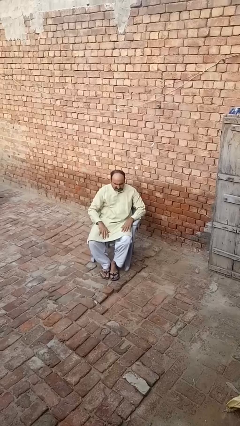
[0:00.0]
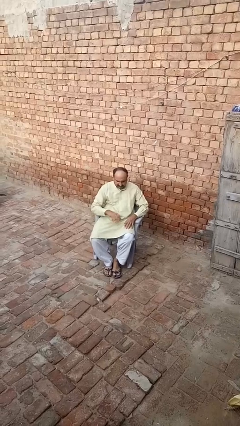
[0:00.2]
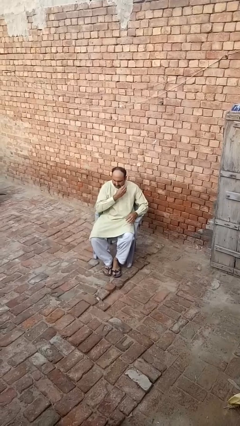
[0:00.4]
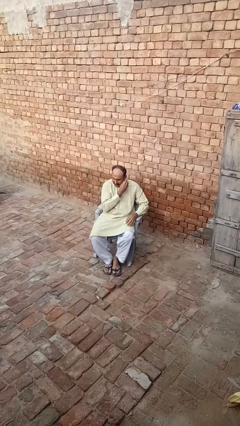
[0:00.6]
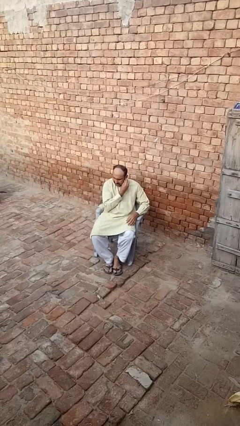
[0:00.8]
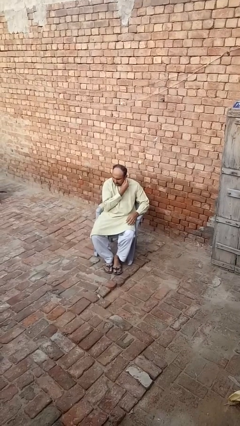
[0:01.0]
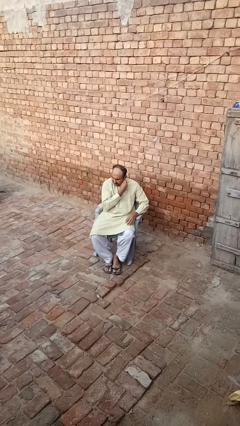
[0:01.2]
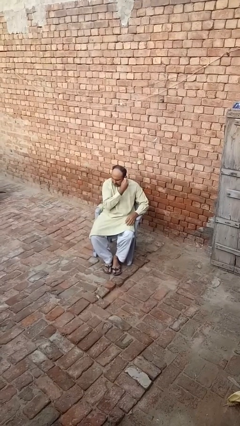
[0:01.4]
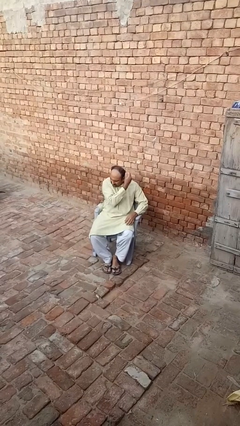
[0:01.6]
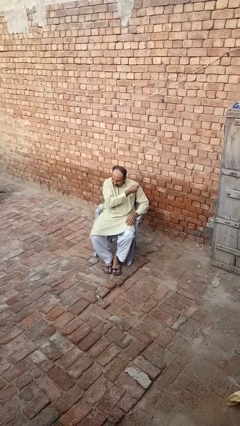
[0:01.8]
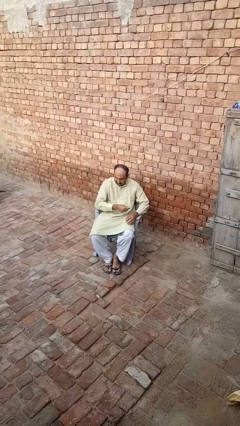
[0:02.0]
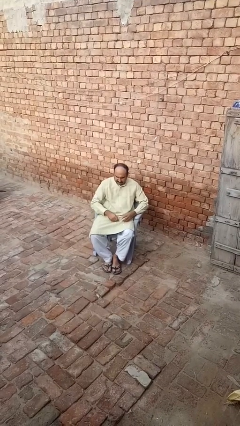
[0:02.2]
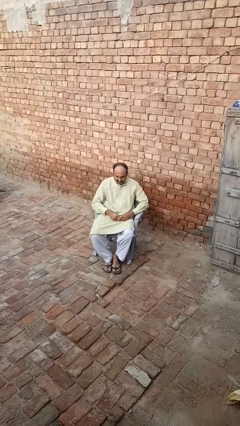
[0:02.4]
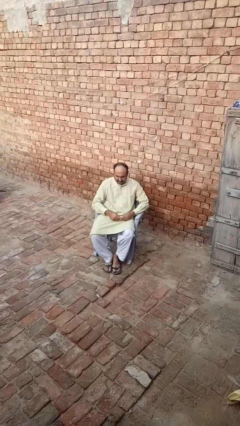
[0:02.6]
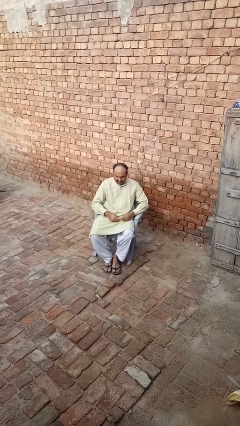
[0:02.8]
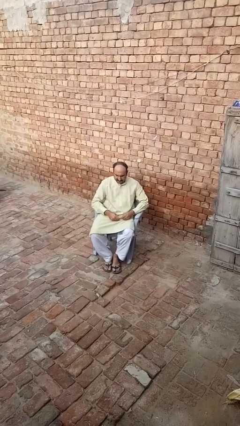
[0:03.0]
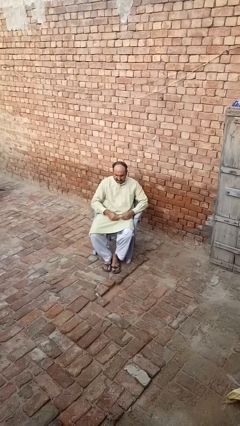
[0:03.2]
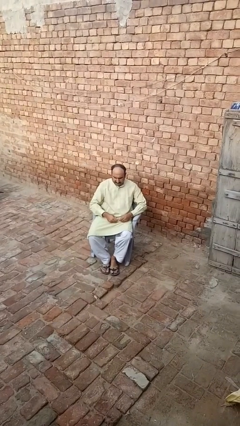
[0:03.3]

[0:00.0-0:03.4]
person takes off earrings

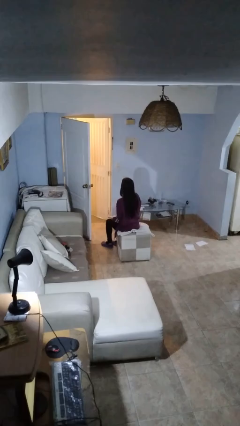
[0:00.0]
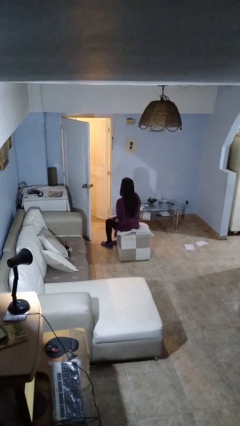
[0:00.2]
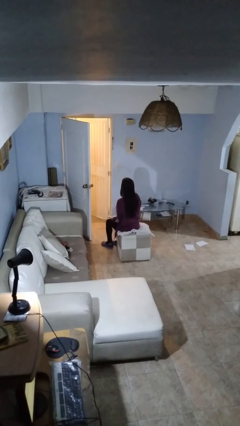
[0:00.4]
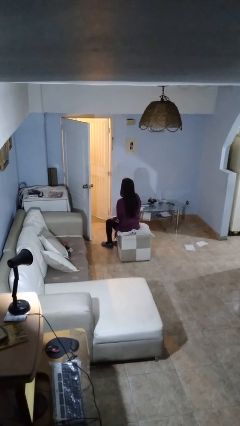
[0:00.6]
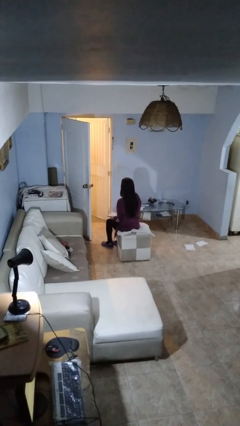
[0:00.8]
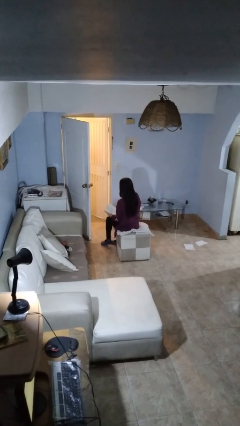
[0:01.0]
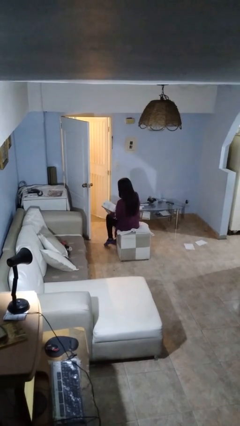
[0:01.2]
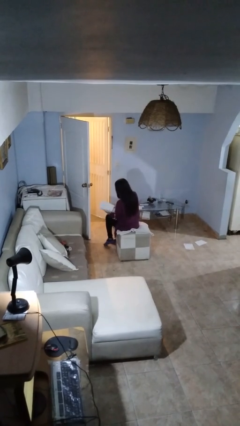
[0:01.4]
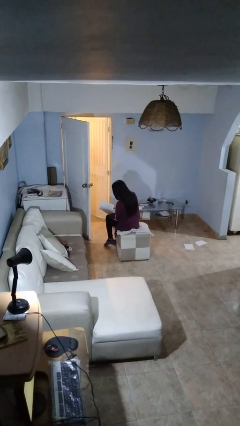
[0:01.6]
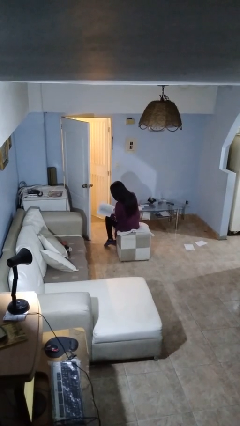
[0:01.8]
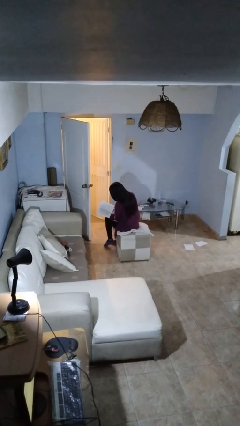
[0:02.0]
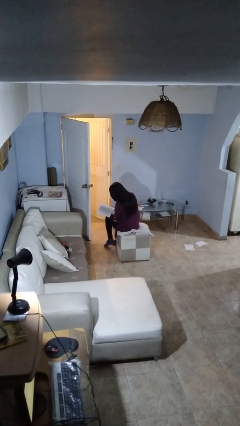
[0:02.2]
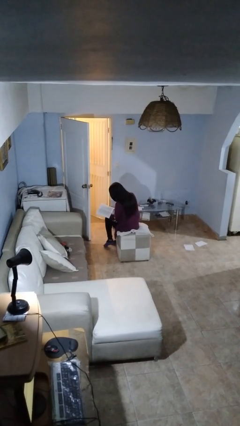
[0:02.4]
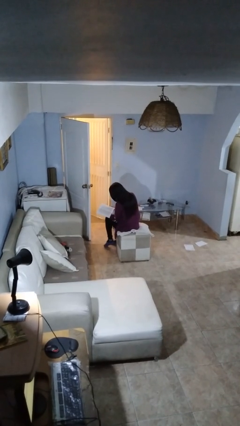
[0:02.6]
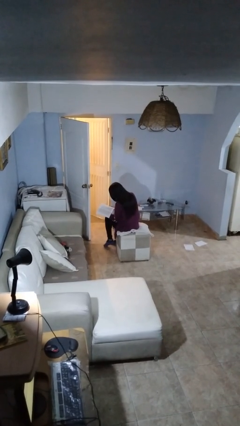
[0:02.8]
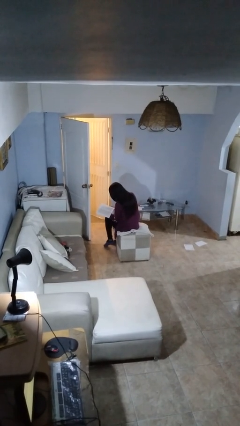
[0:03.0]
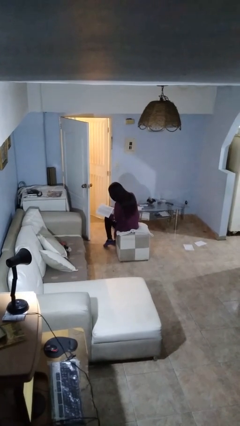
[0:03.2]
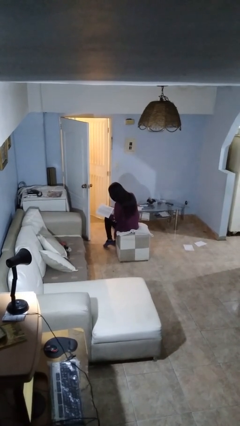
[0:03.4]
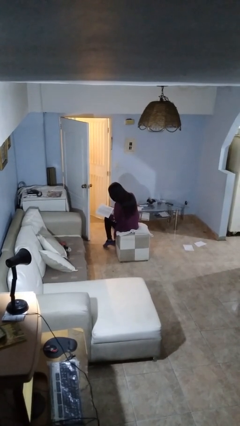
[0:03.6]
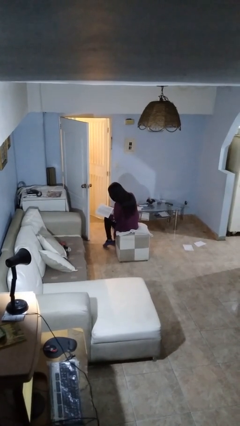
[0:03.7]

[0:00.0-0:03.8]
person reads book

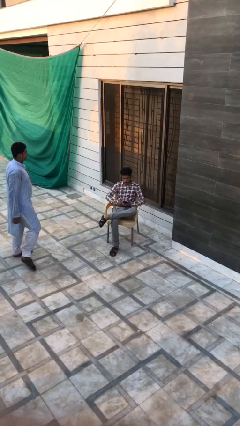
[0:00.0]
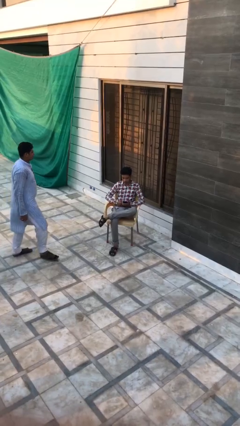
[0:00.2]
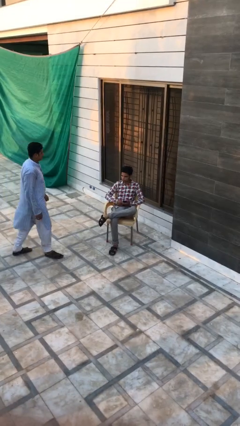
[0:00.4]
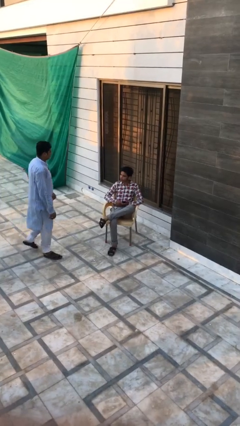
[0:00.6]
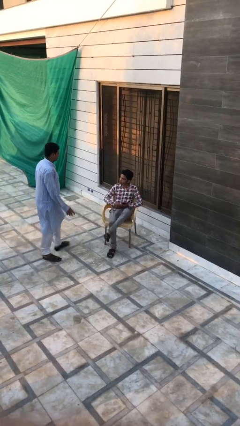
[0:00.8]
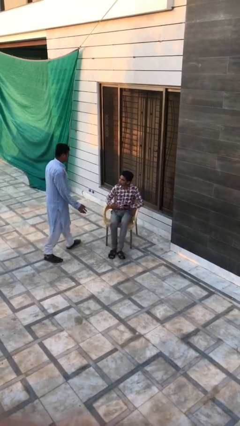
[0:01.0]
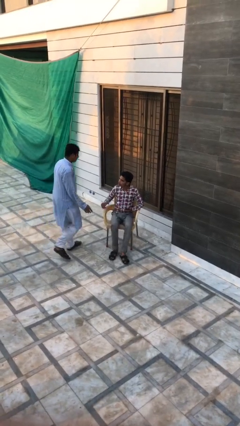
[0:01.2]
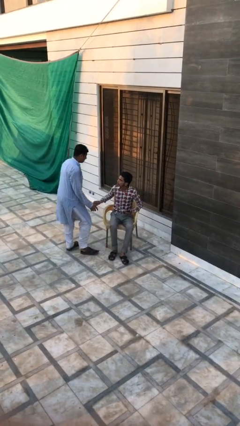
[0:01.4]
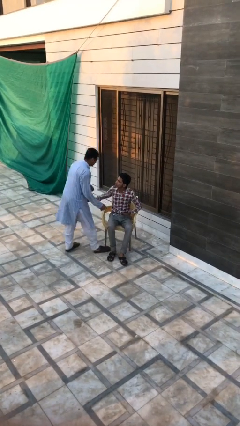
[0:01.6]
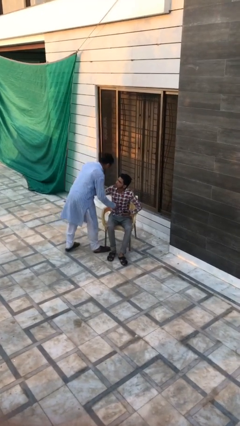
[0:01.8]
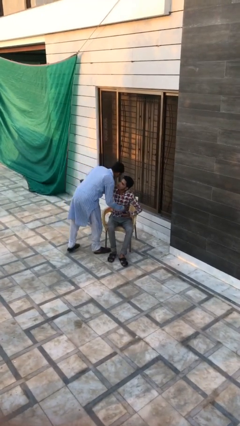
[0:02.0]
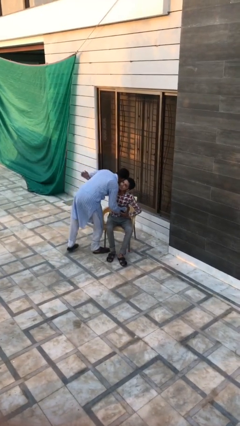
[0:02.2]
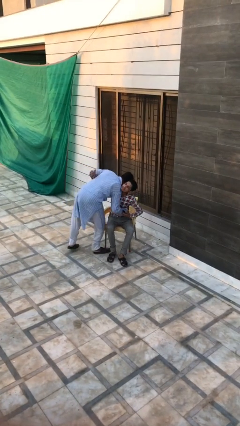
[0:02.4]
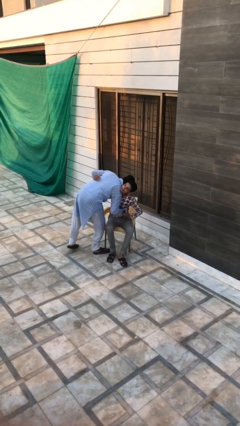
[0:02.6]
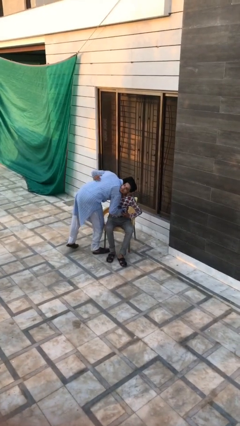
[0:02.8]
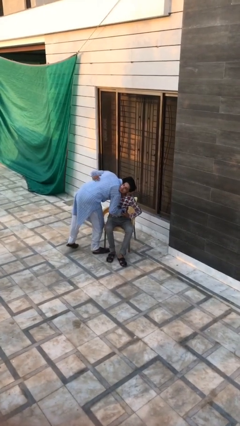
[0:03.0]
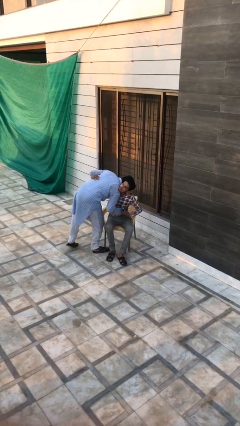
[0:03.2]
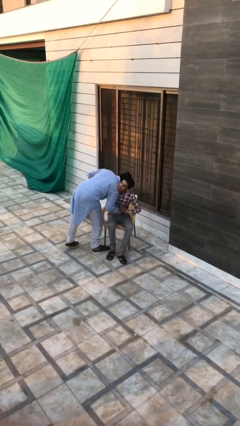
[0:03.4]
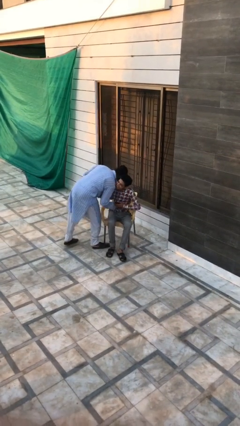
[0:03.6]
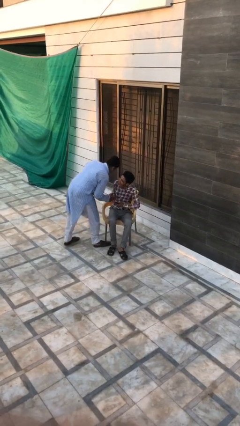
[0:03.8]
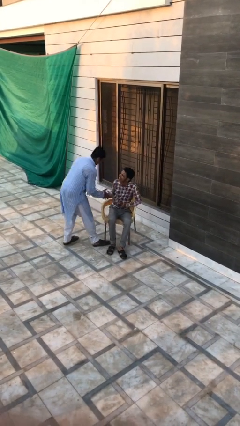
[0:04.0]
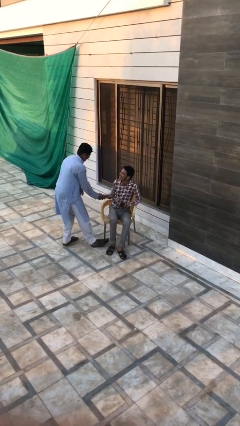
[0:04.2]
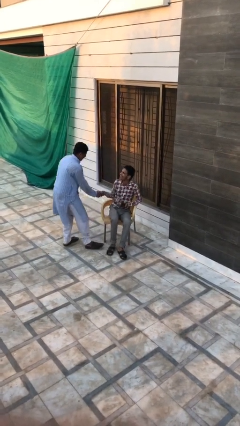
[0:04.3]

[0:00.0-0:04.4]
person embraces person

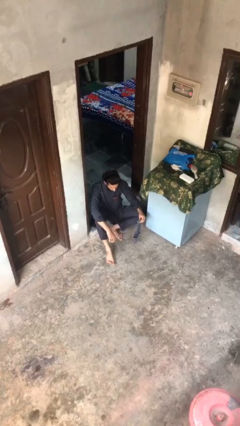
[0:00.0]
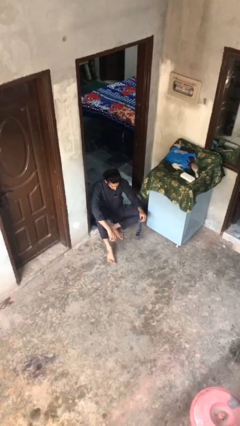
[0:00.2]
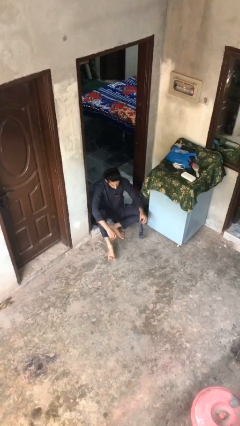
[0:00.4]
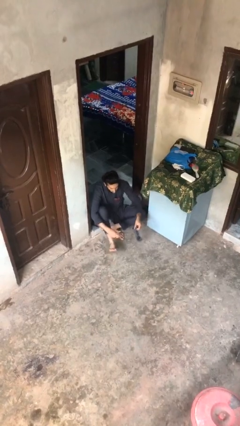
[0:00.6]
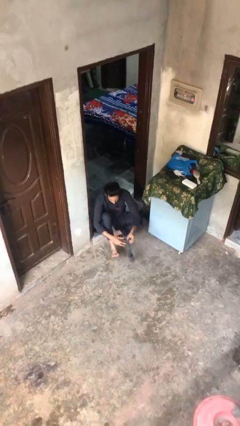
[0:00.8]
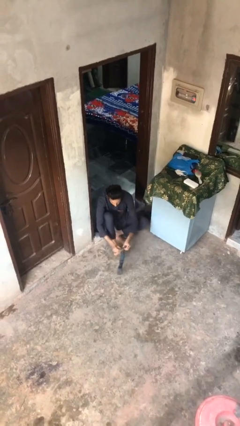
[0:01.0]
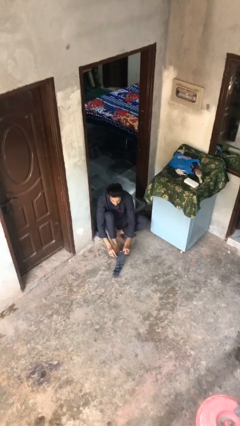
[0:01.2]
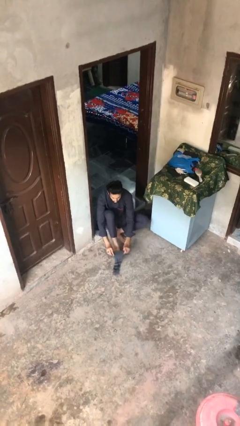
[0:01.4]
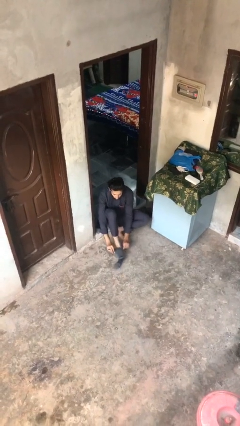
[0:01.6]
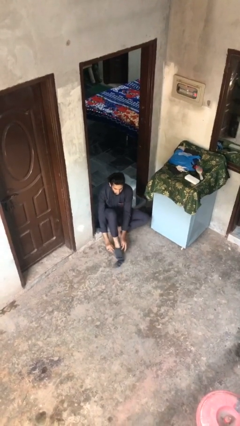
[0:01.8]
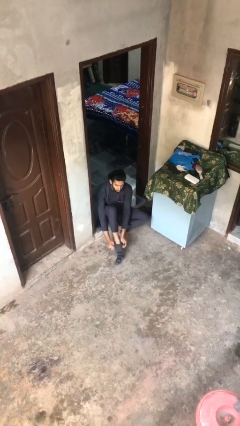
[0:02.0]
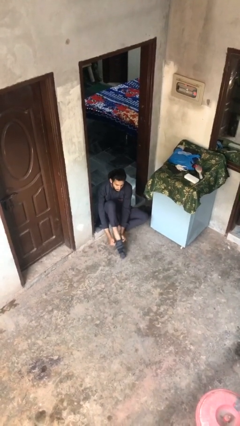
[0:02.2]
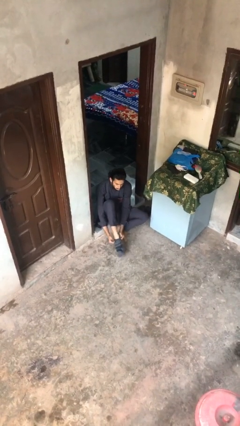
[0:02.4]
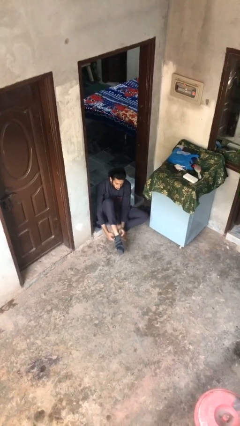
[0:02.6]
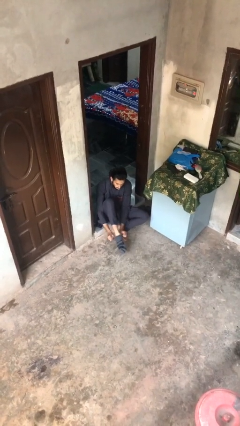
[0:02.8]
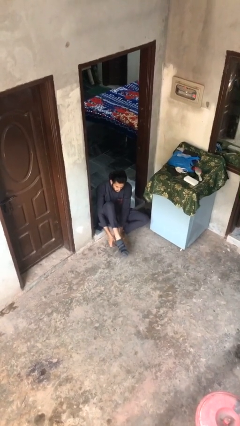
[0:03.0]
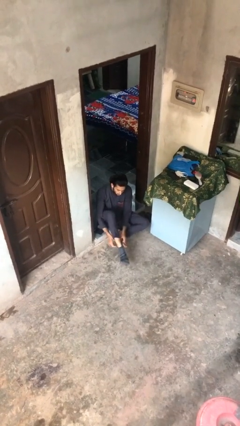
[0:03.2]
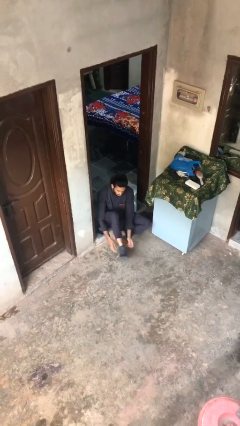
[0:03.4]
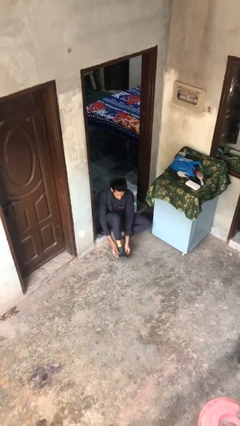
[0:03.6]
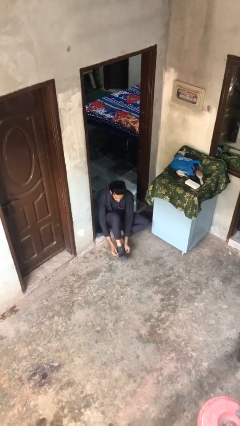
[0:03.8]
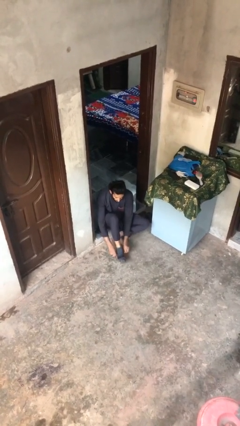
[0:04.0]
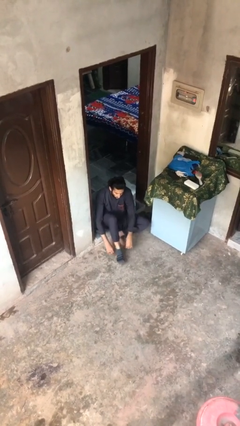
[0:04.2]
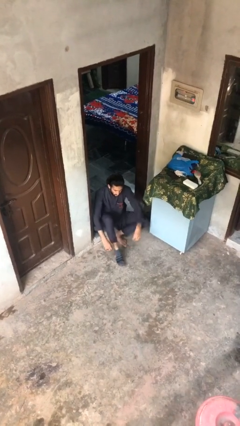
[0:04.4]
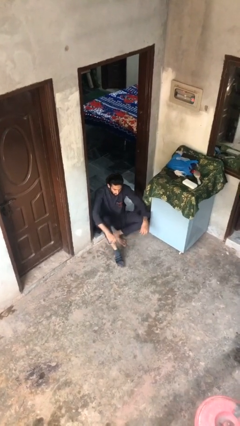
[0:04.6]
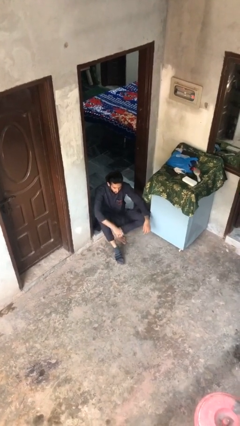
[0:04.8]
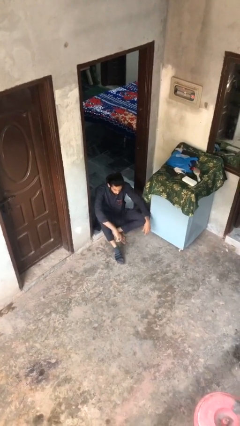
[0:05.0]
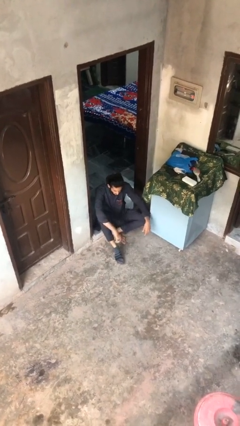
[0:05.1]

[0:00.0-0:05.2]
person puts on socks

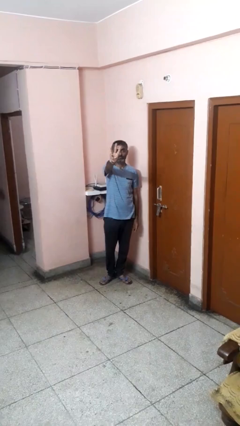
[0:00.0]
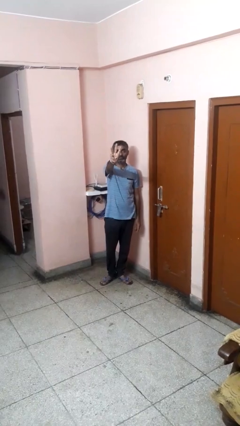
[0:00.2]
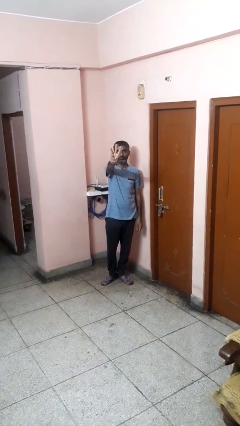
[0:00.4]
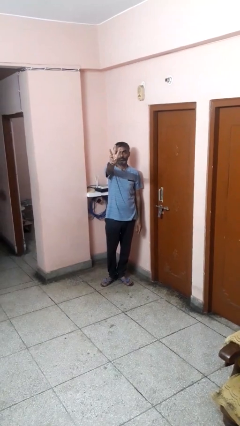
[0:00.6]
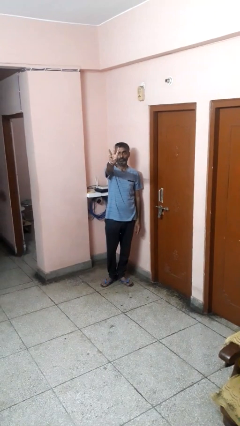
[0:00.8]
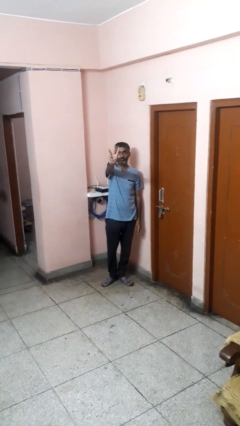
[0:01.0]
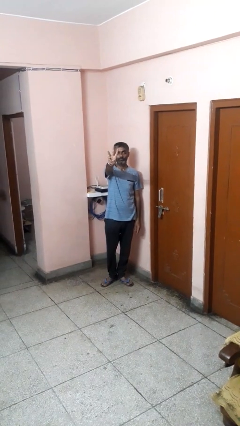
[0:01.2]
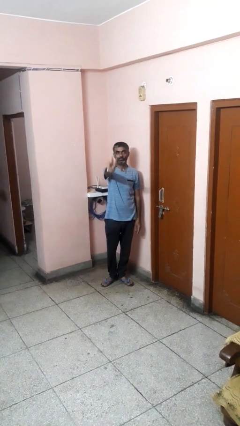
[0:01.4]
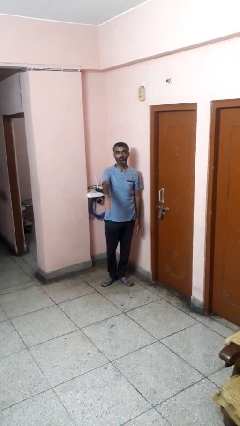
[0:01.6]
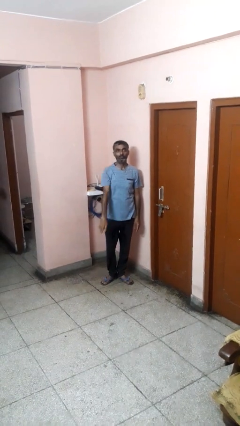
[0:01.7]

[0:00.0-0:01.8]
person gestures number three
